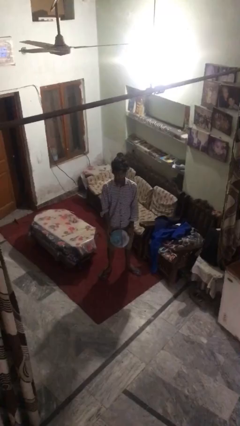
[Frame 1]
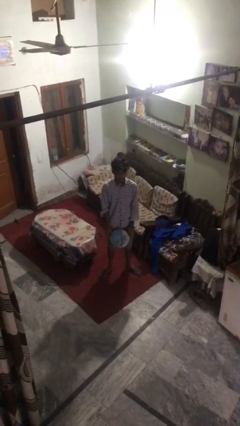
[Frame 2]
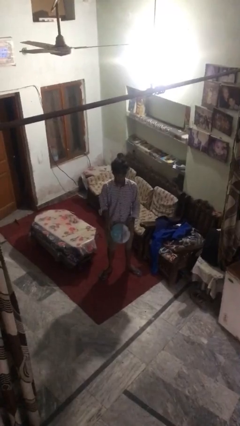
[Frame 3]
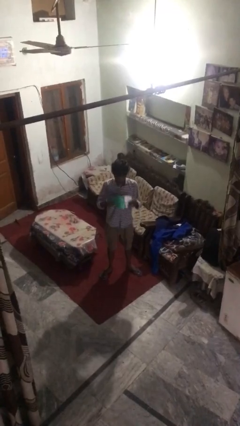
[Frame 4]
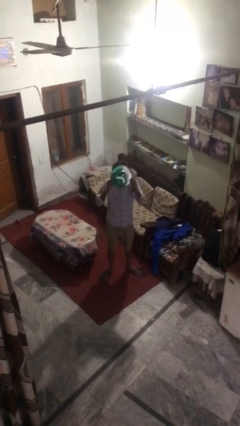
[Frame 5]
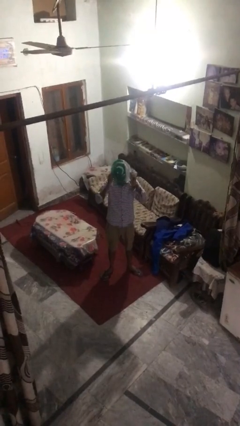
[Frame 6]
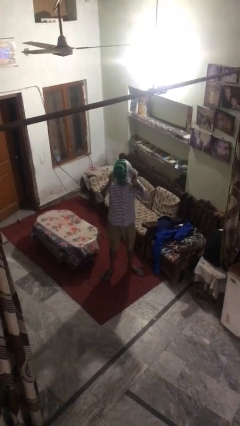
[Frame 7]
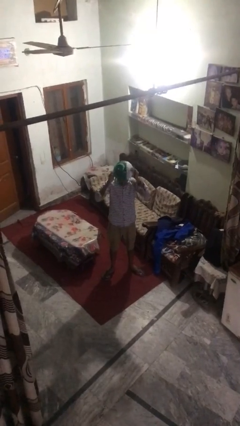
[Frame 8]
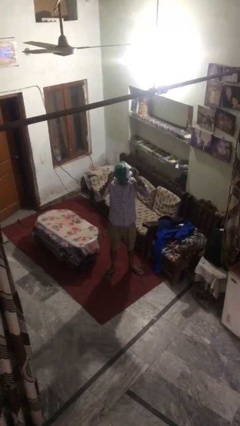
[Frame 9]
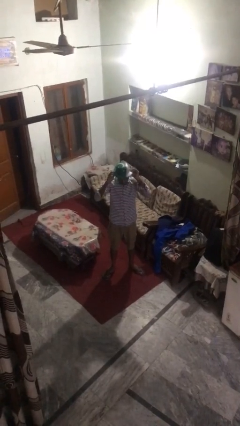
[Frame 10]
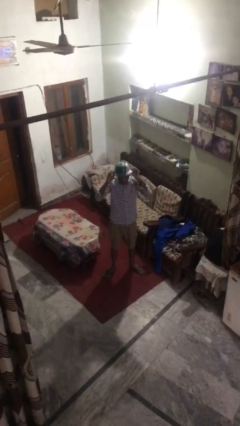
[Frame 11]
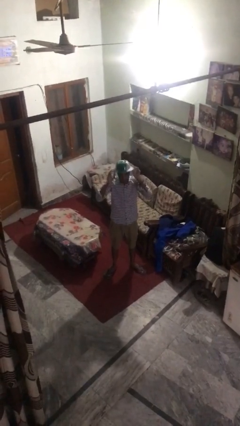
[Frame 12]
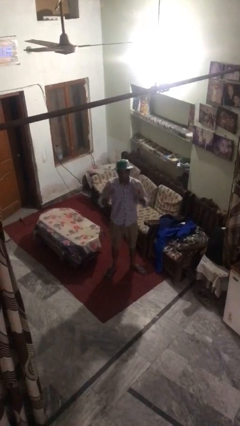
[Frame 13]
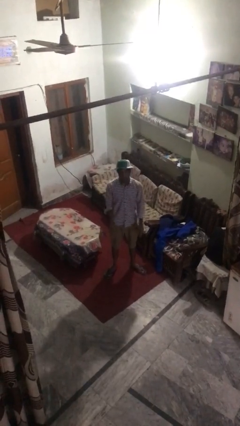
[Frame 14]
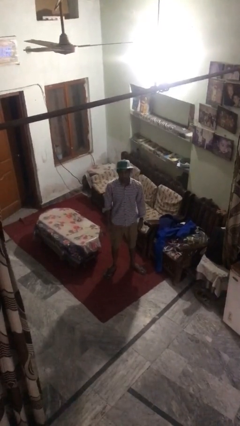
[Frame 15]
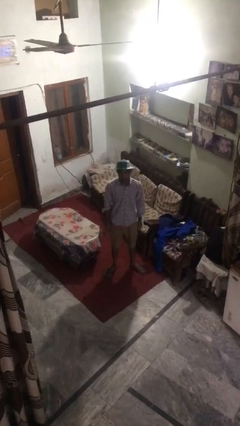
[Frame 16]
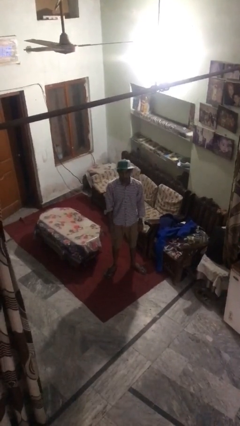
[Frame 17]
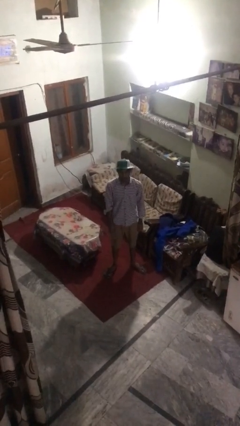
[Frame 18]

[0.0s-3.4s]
person puts on hat

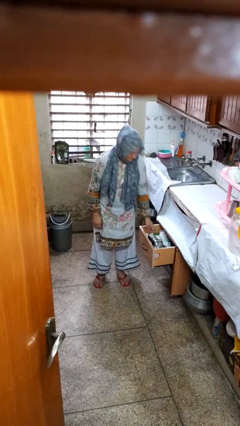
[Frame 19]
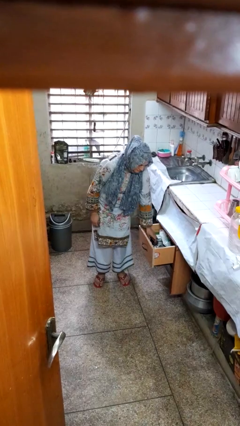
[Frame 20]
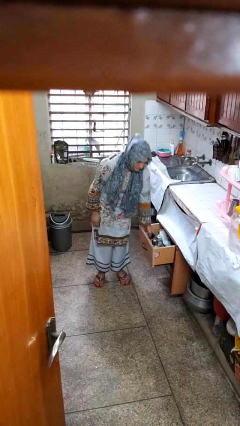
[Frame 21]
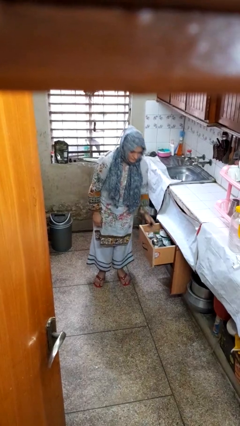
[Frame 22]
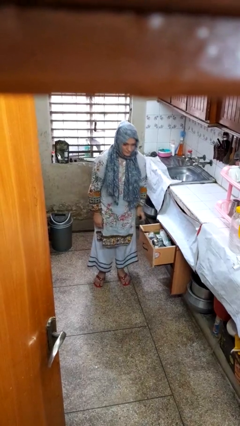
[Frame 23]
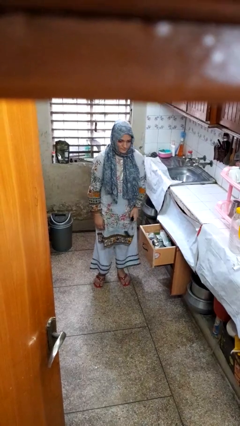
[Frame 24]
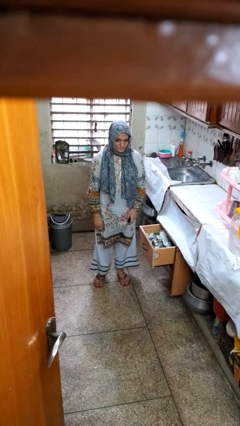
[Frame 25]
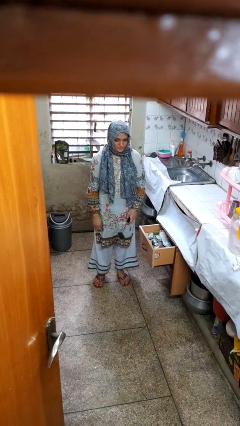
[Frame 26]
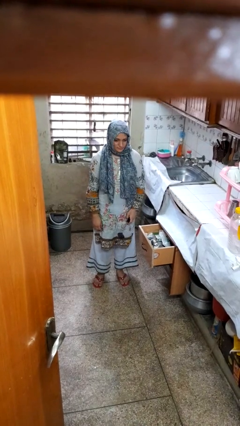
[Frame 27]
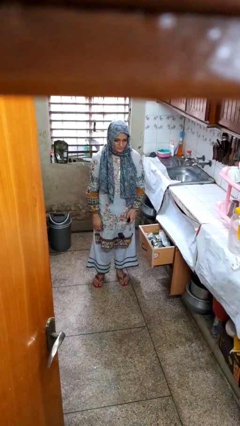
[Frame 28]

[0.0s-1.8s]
person takes object from kitchen drawer

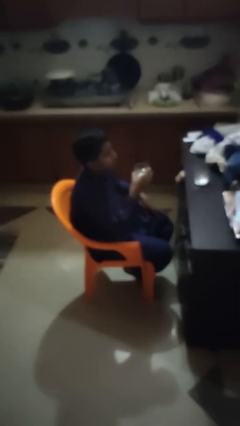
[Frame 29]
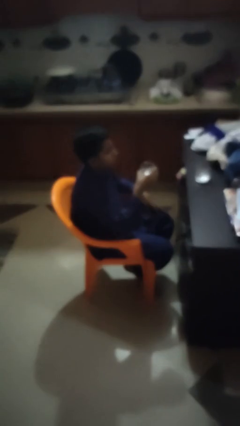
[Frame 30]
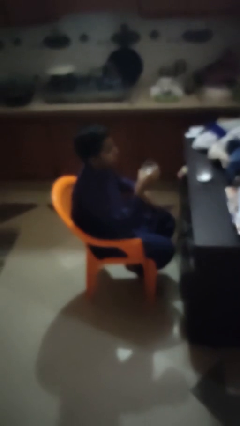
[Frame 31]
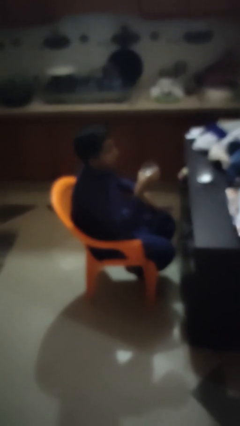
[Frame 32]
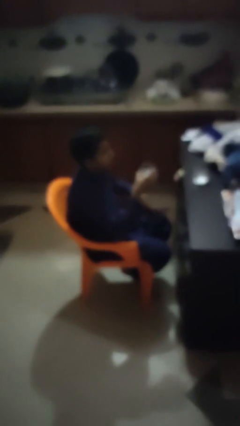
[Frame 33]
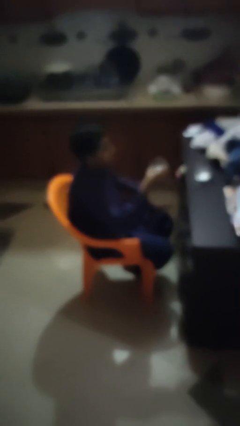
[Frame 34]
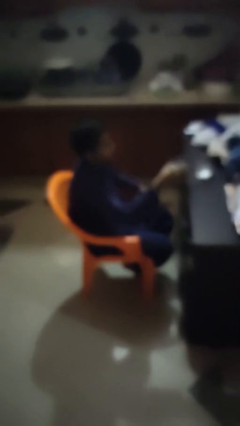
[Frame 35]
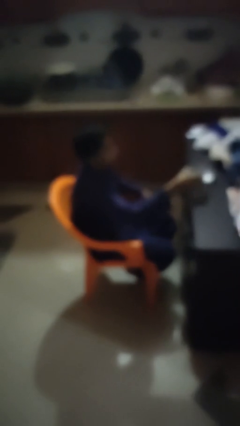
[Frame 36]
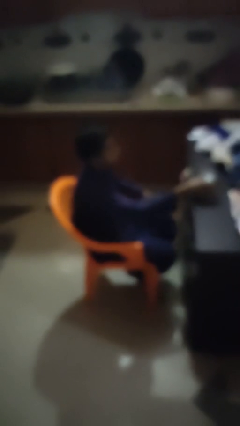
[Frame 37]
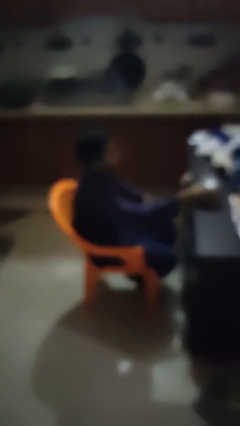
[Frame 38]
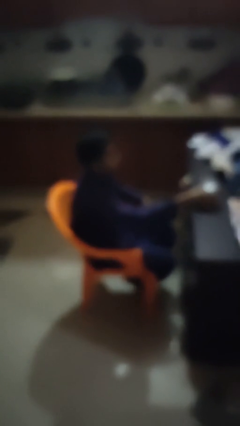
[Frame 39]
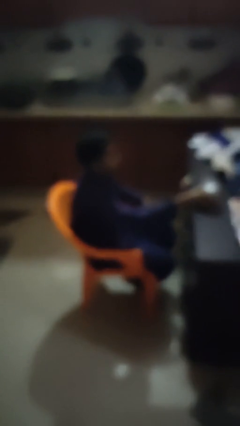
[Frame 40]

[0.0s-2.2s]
person puts down object on table

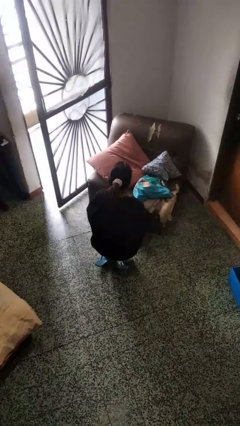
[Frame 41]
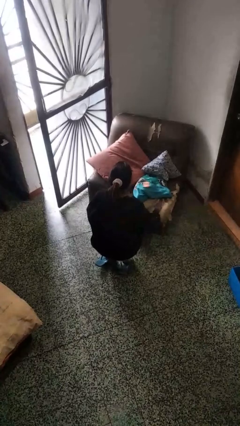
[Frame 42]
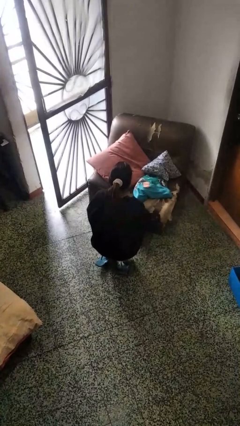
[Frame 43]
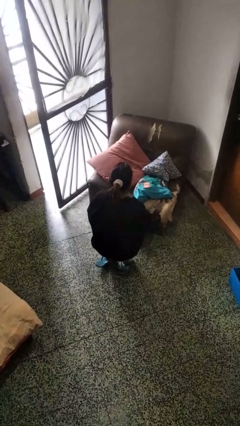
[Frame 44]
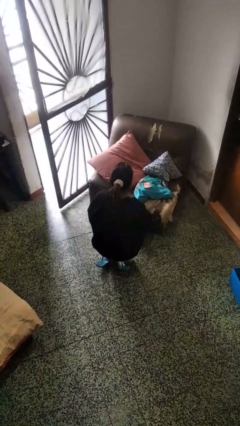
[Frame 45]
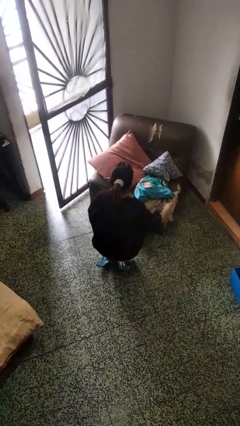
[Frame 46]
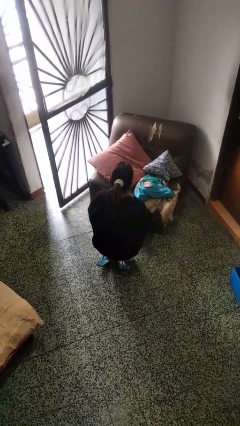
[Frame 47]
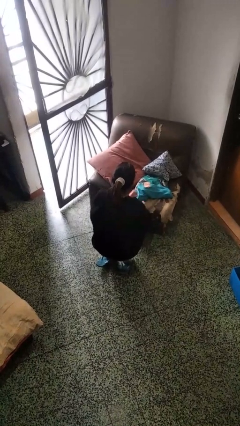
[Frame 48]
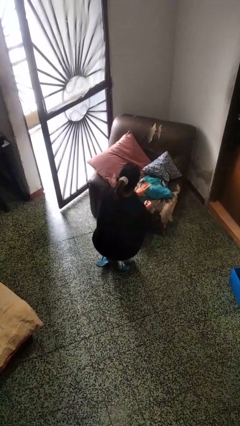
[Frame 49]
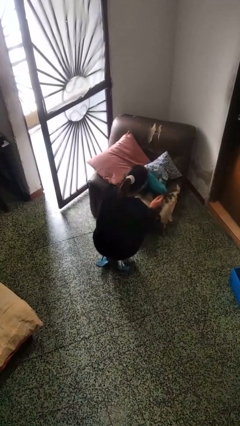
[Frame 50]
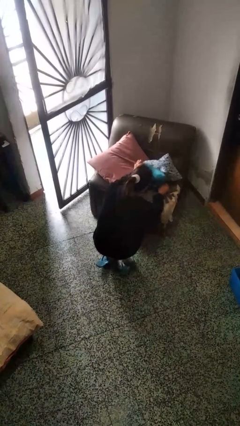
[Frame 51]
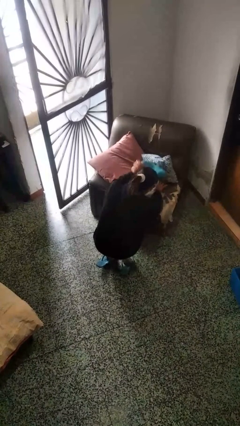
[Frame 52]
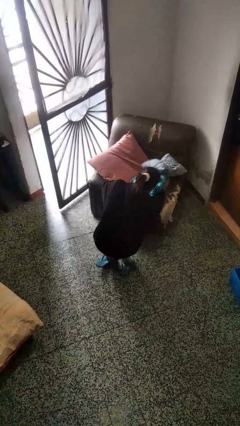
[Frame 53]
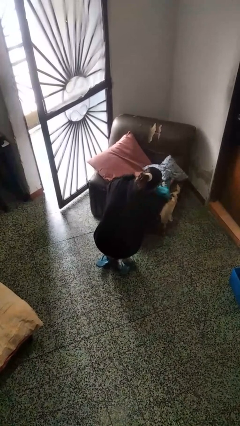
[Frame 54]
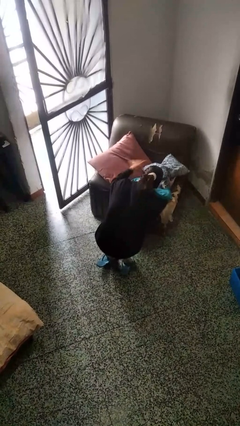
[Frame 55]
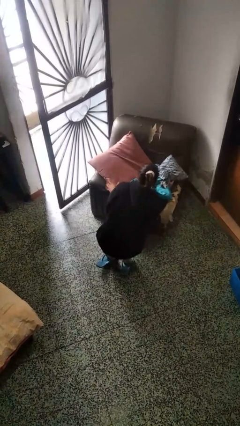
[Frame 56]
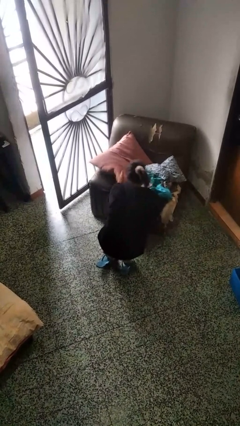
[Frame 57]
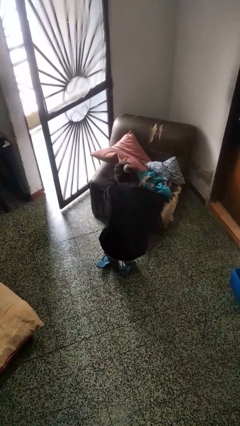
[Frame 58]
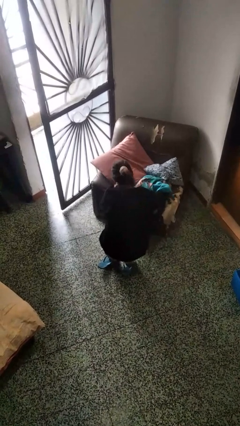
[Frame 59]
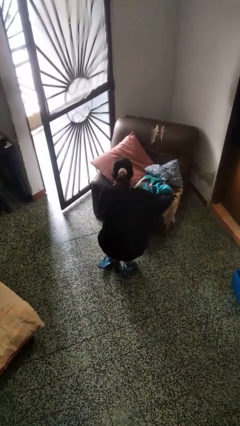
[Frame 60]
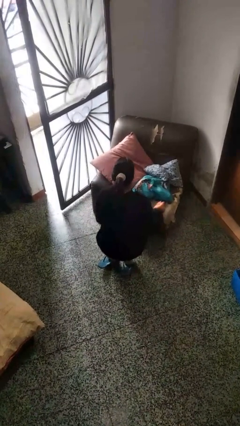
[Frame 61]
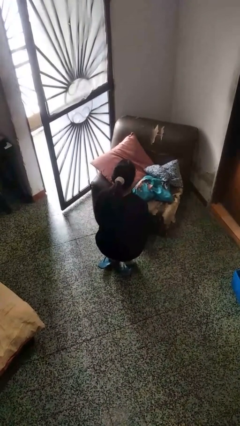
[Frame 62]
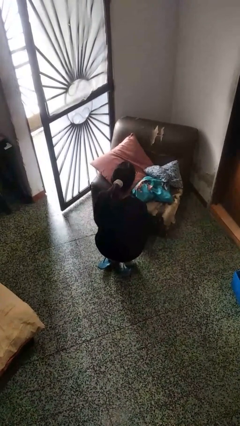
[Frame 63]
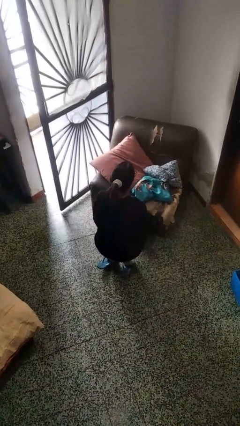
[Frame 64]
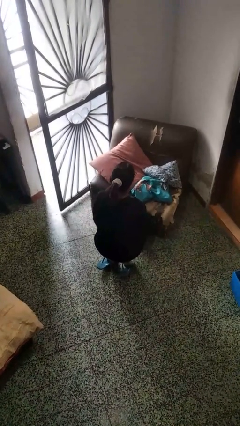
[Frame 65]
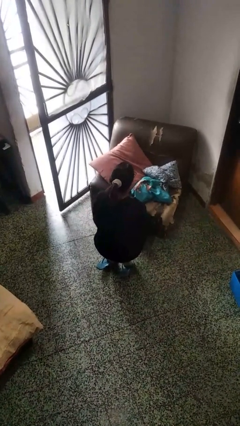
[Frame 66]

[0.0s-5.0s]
person searches in couch

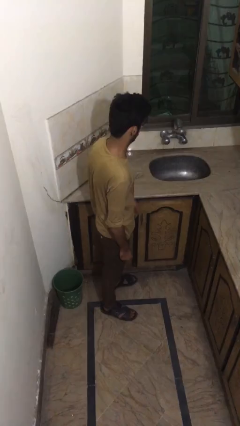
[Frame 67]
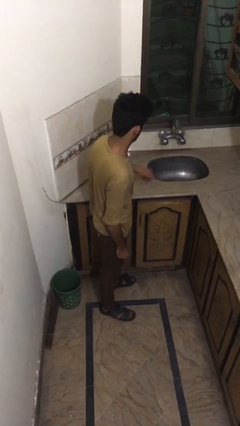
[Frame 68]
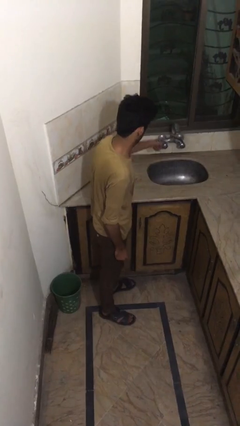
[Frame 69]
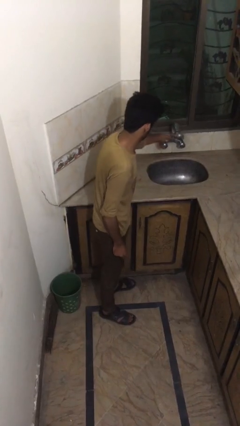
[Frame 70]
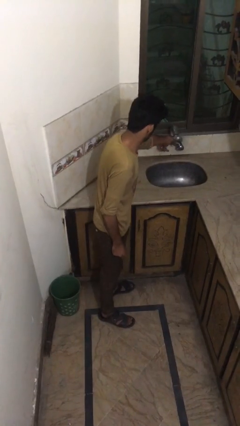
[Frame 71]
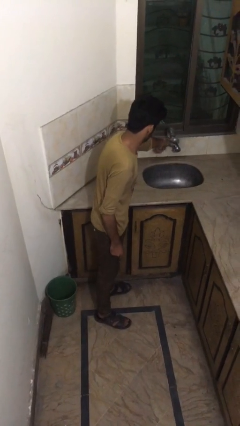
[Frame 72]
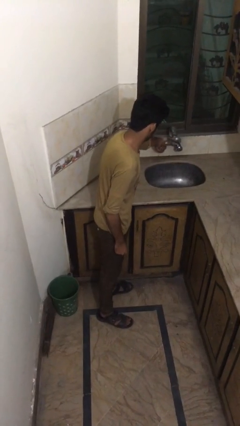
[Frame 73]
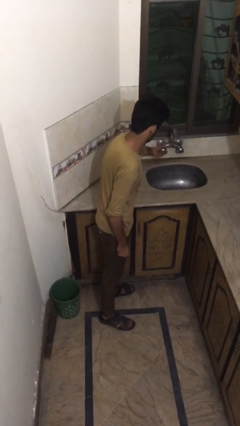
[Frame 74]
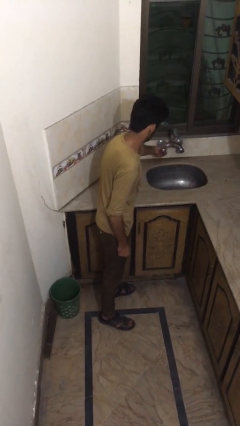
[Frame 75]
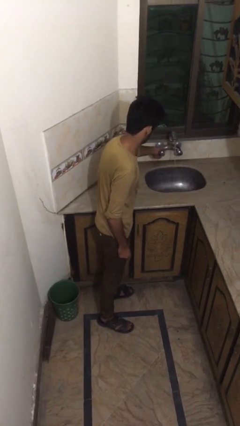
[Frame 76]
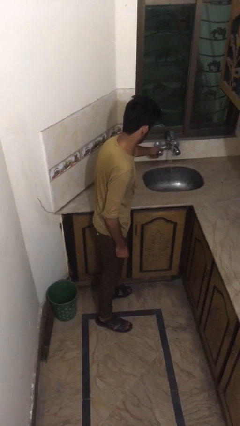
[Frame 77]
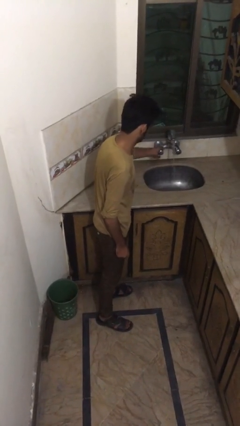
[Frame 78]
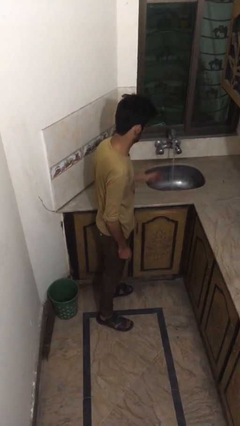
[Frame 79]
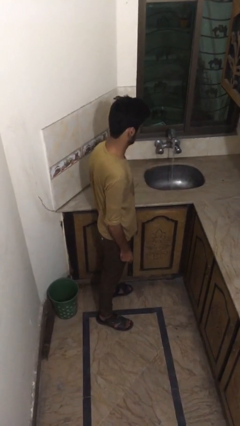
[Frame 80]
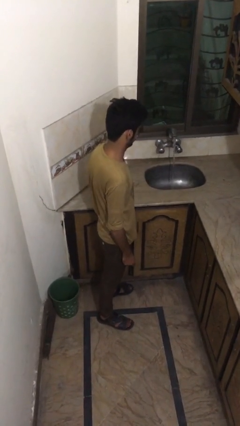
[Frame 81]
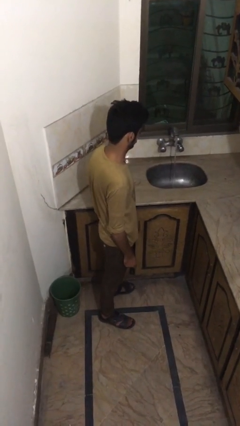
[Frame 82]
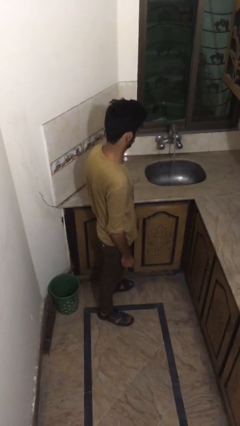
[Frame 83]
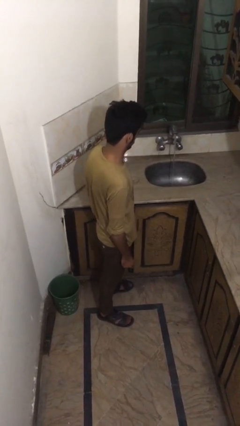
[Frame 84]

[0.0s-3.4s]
person turns on faucet

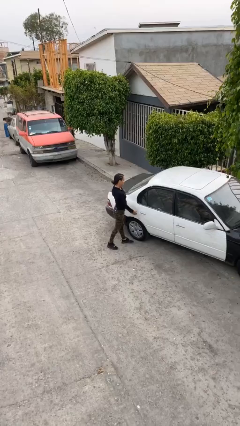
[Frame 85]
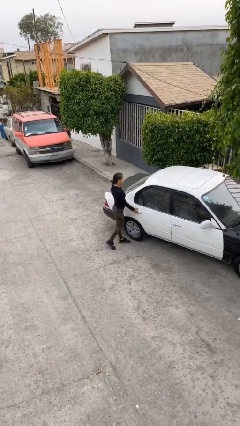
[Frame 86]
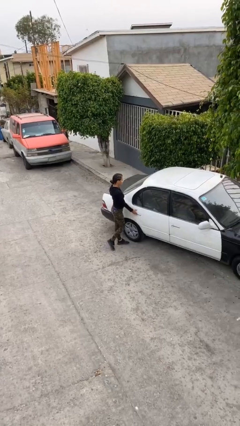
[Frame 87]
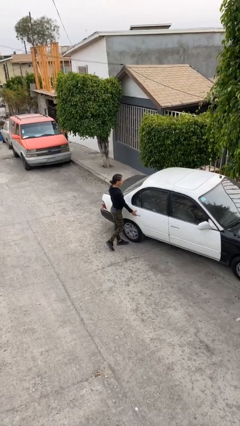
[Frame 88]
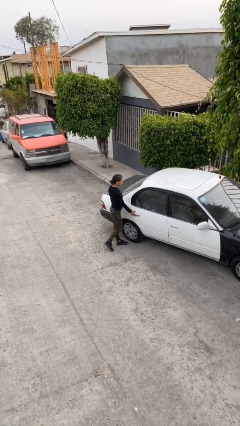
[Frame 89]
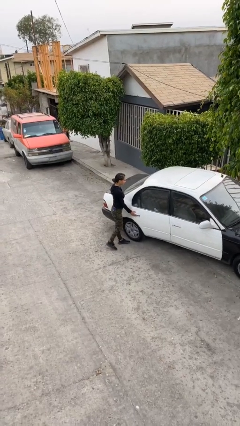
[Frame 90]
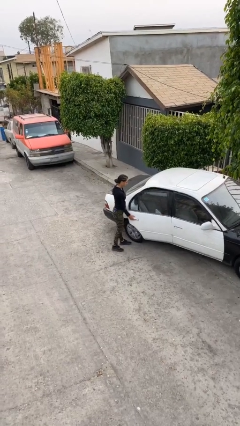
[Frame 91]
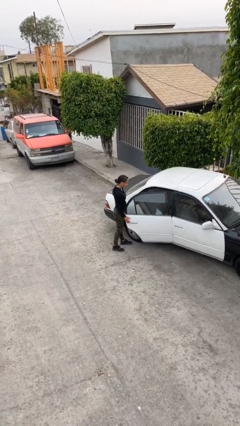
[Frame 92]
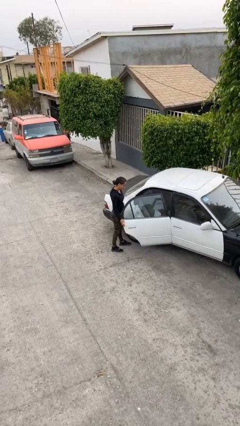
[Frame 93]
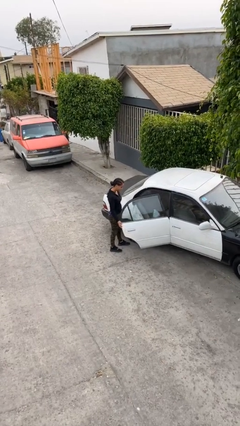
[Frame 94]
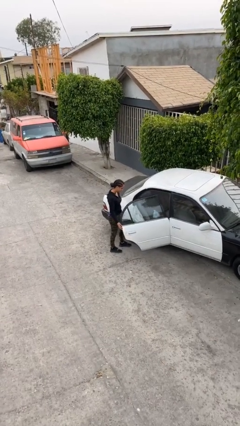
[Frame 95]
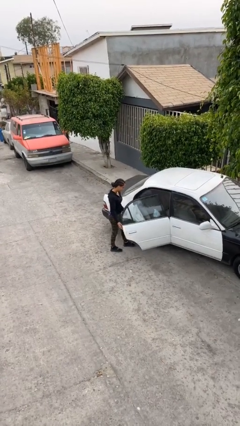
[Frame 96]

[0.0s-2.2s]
person opens car door
